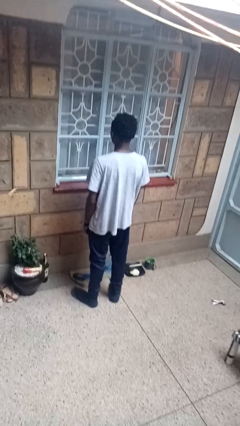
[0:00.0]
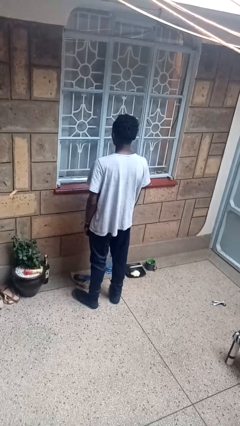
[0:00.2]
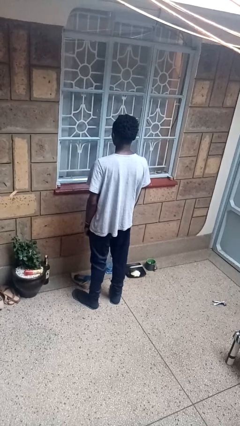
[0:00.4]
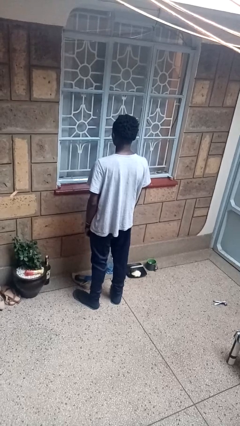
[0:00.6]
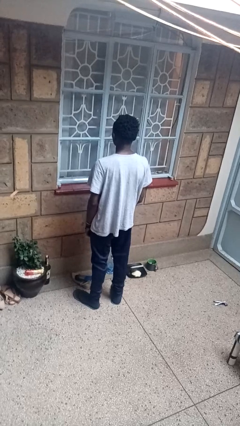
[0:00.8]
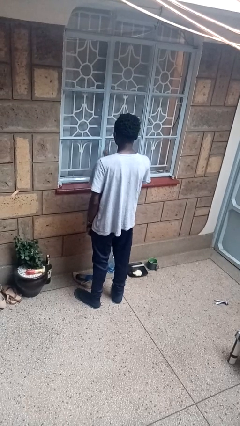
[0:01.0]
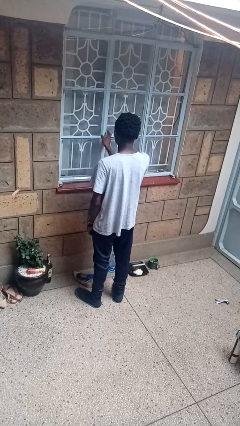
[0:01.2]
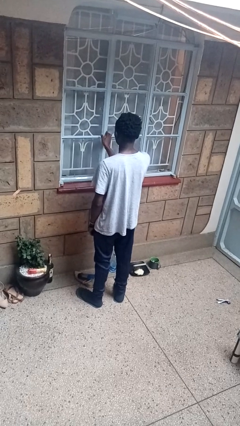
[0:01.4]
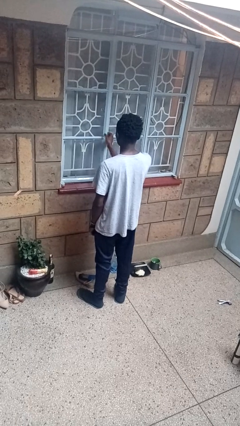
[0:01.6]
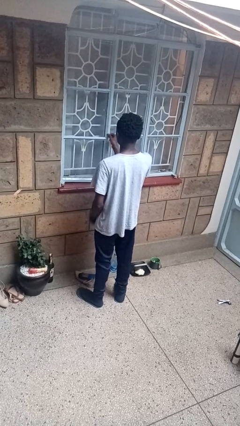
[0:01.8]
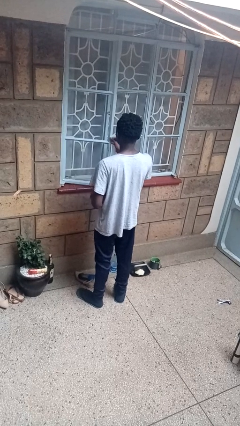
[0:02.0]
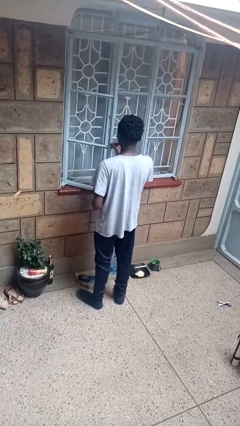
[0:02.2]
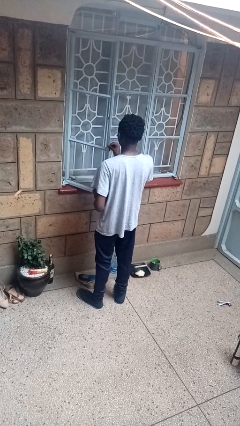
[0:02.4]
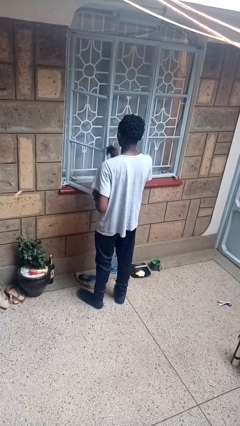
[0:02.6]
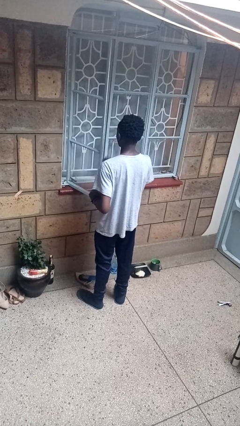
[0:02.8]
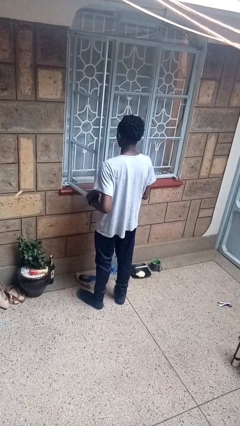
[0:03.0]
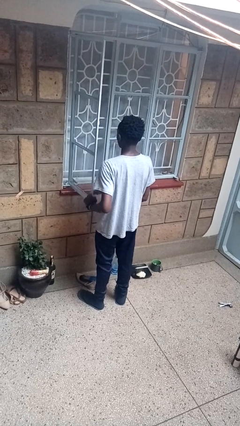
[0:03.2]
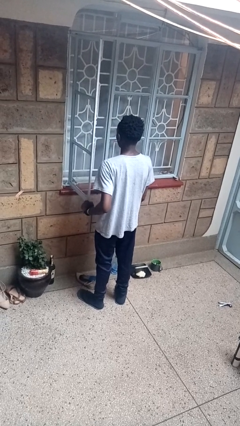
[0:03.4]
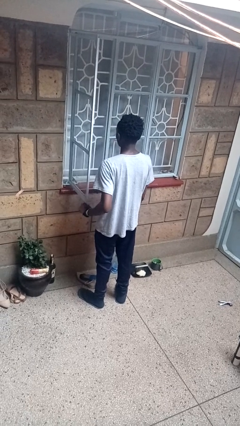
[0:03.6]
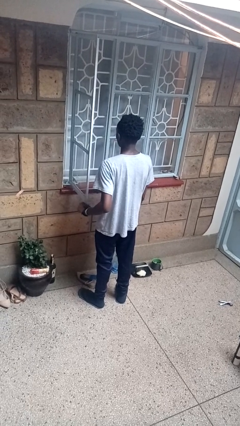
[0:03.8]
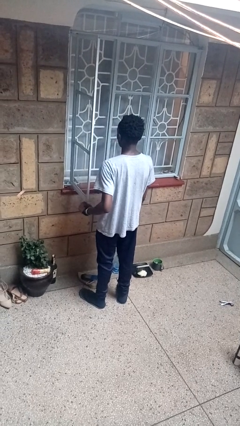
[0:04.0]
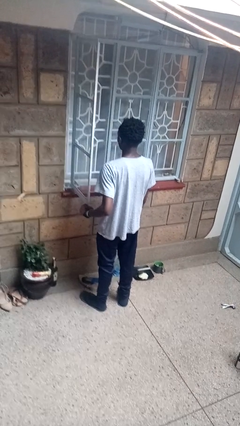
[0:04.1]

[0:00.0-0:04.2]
person opens home window

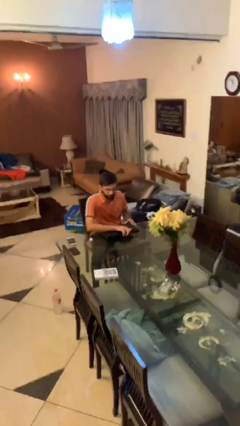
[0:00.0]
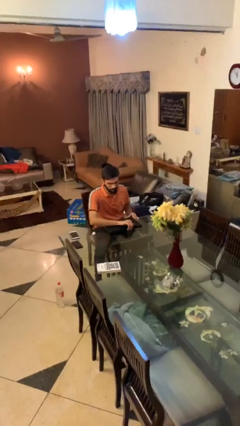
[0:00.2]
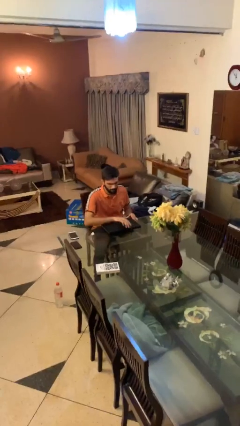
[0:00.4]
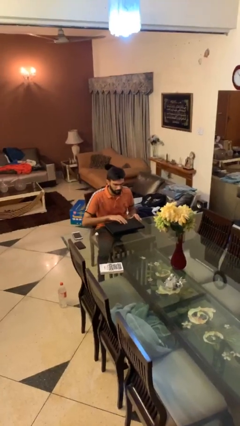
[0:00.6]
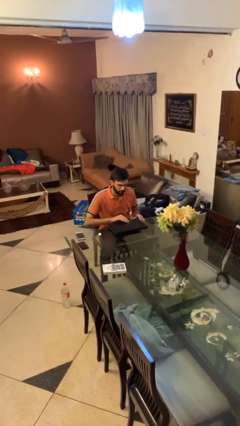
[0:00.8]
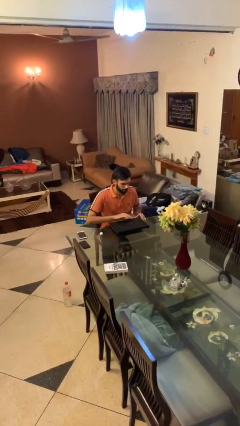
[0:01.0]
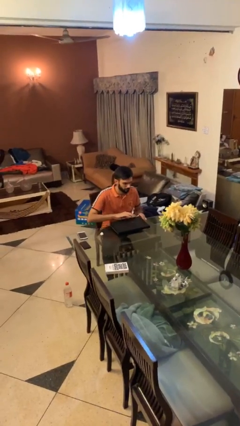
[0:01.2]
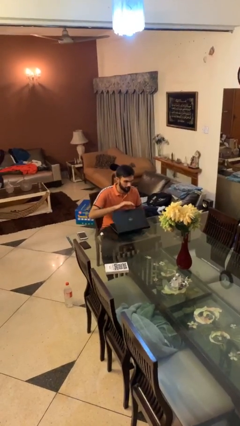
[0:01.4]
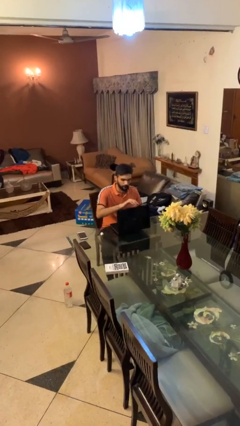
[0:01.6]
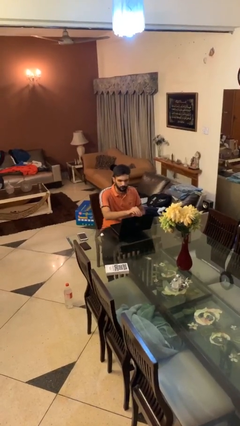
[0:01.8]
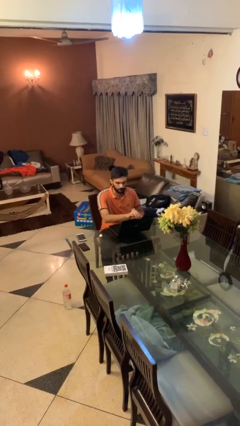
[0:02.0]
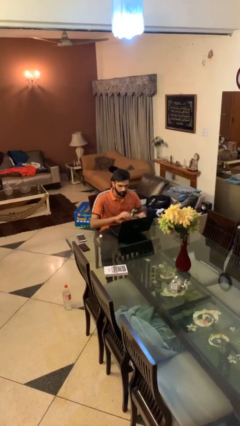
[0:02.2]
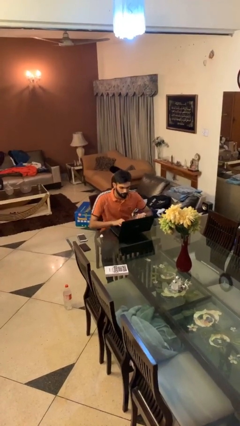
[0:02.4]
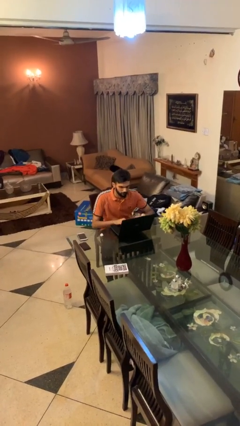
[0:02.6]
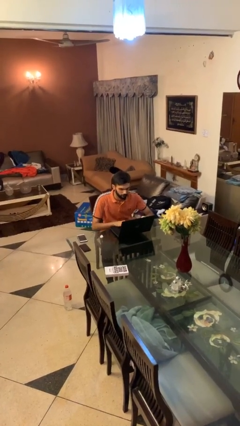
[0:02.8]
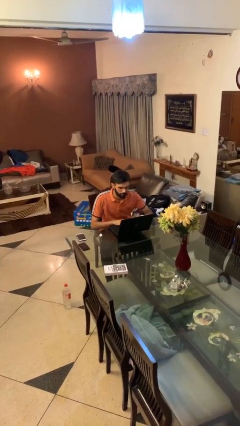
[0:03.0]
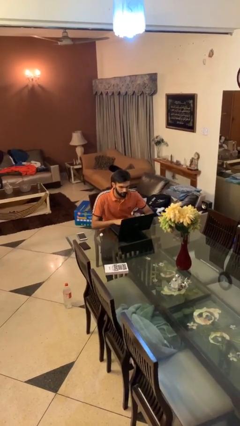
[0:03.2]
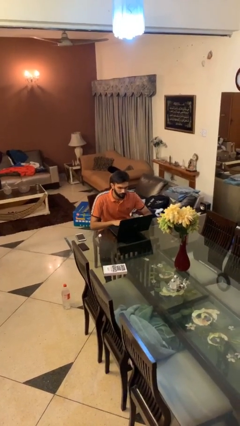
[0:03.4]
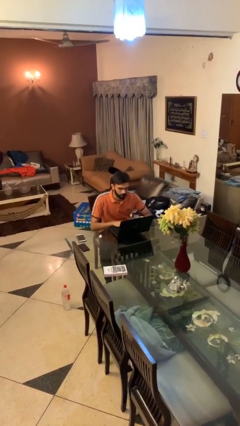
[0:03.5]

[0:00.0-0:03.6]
person interacts with laptop

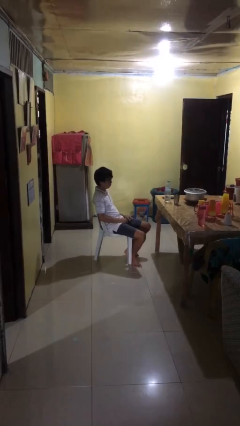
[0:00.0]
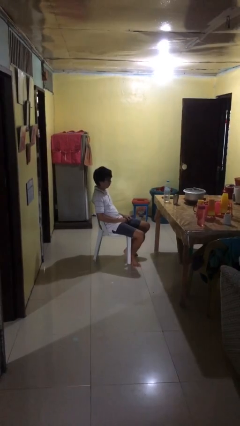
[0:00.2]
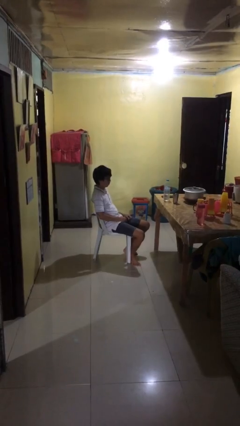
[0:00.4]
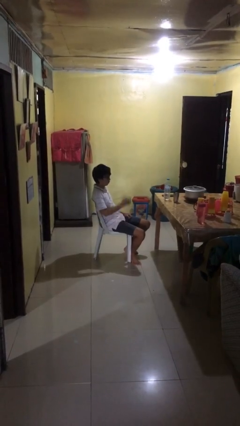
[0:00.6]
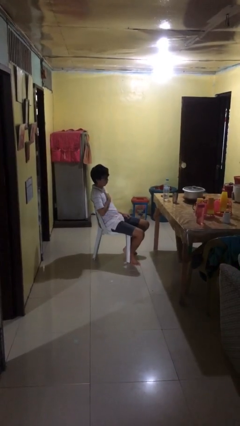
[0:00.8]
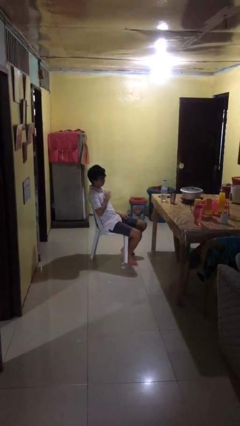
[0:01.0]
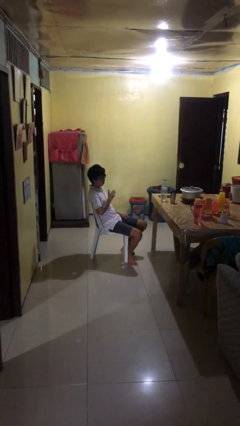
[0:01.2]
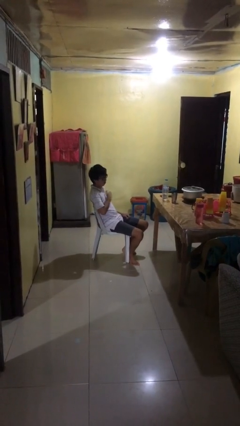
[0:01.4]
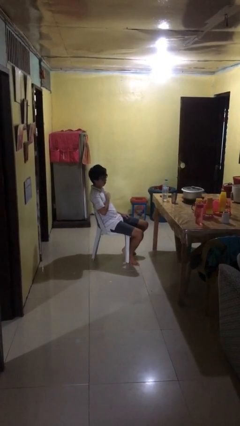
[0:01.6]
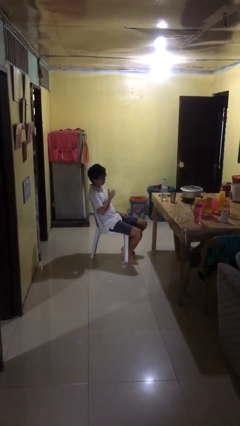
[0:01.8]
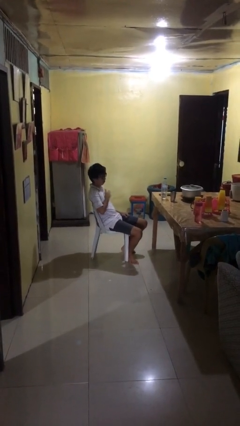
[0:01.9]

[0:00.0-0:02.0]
person drums on chest

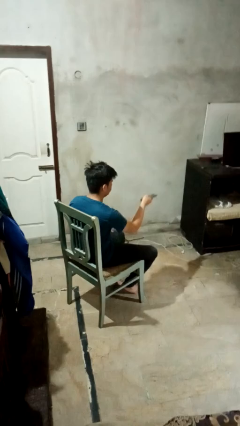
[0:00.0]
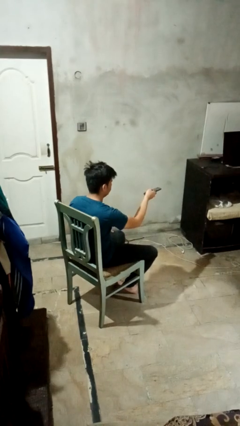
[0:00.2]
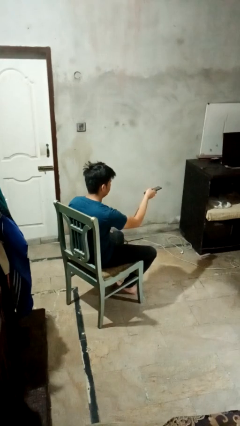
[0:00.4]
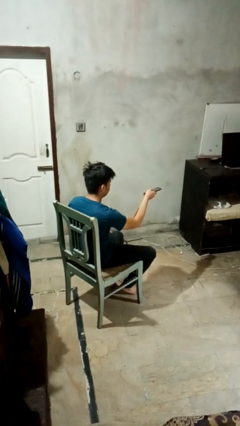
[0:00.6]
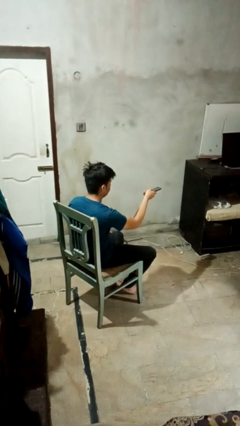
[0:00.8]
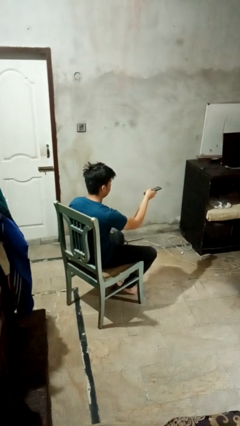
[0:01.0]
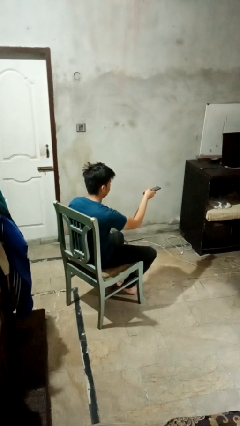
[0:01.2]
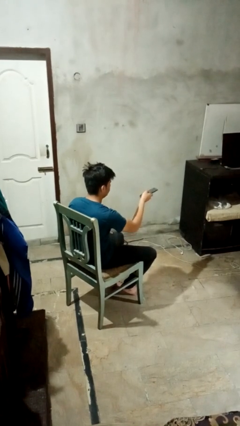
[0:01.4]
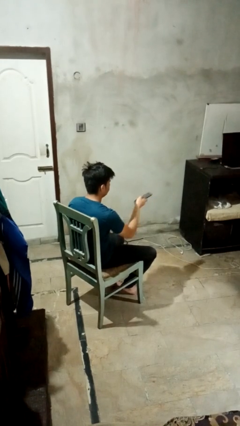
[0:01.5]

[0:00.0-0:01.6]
person uses television remote

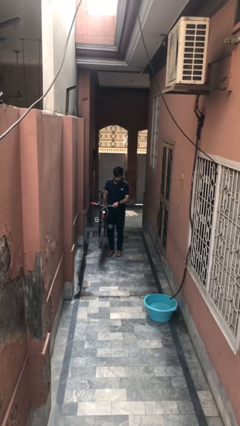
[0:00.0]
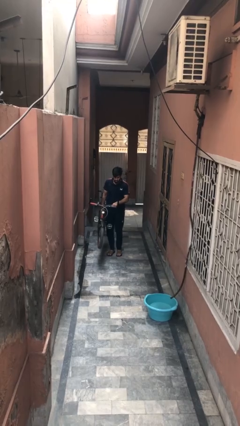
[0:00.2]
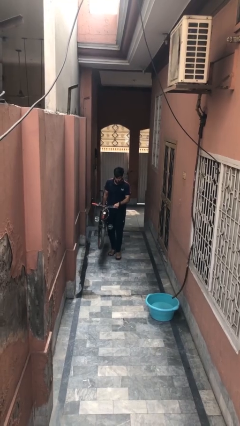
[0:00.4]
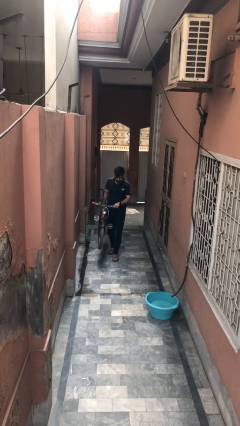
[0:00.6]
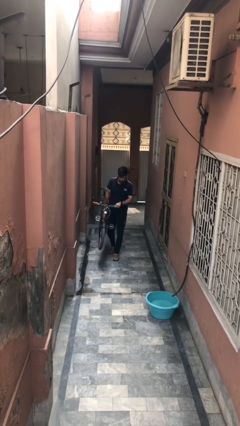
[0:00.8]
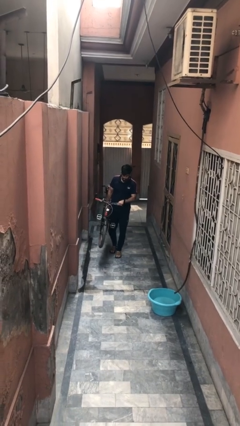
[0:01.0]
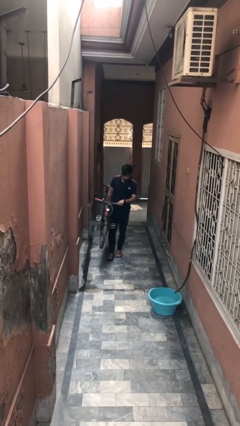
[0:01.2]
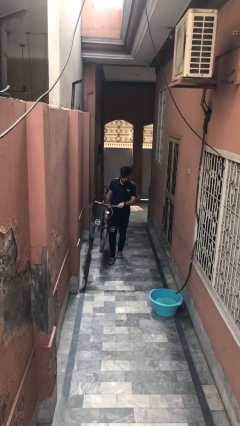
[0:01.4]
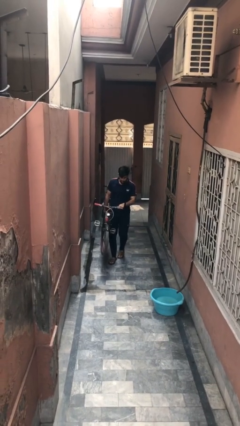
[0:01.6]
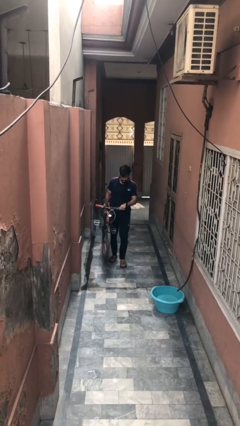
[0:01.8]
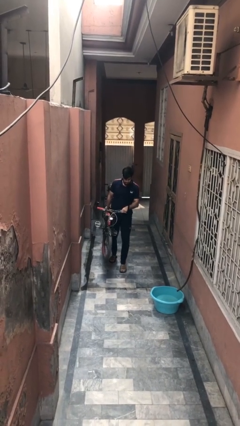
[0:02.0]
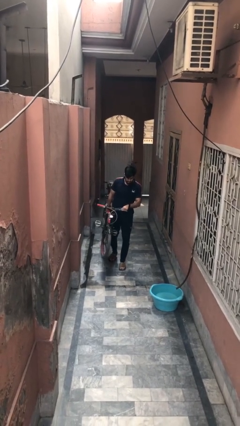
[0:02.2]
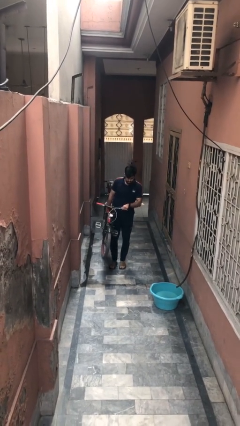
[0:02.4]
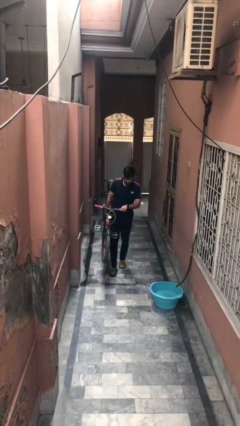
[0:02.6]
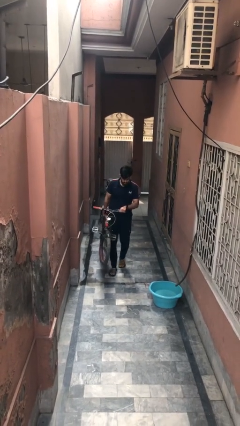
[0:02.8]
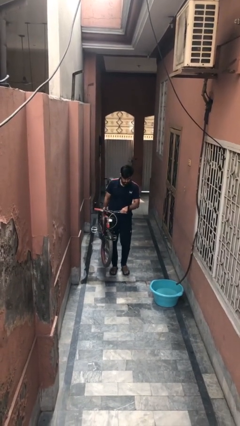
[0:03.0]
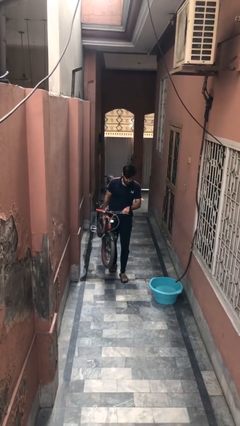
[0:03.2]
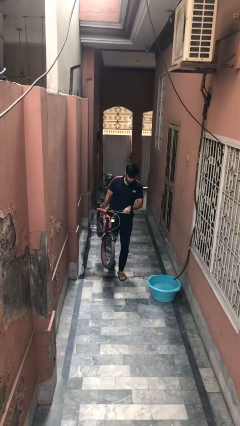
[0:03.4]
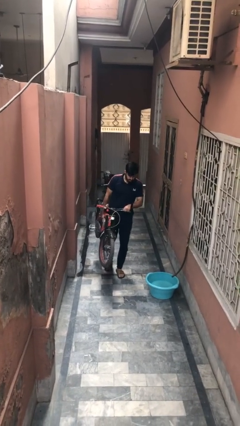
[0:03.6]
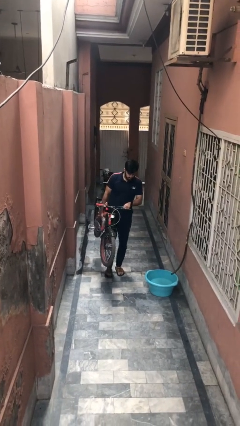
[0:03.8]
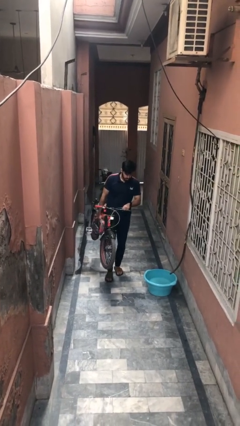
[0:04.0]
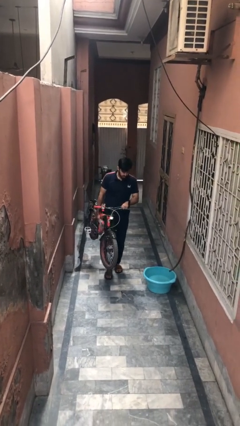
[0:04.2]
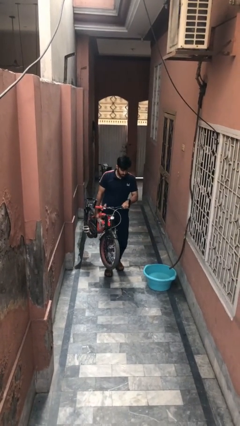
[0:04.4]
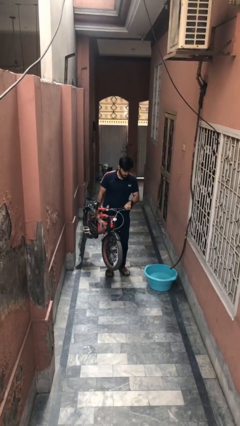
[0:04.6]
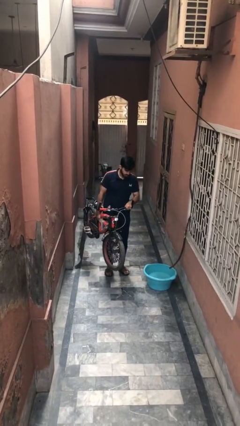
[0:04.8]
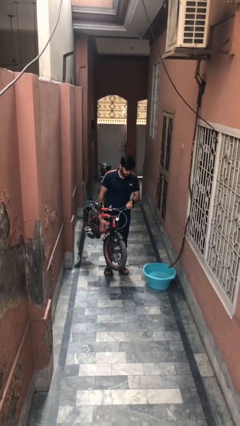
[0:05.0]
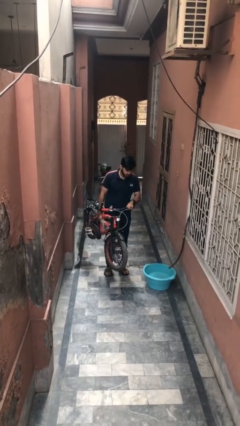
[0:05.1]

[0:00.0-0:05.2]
person carries bicycle

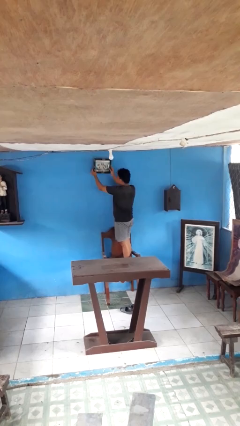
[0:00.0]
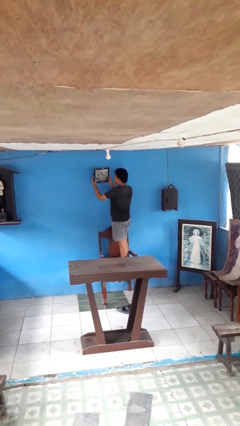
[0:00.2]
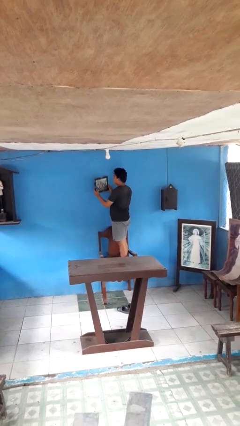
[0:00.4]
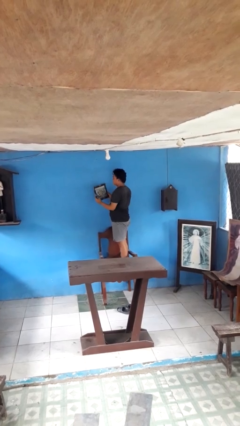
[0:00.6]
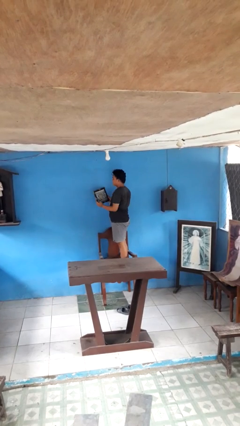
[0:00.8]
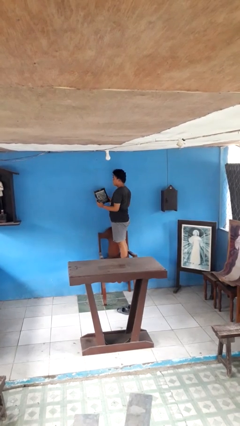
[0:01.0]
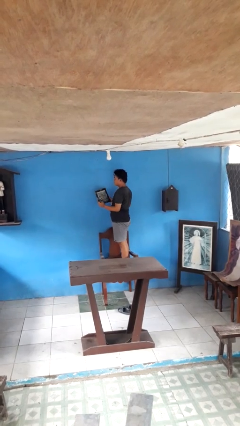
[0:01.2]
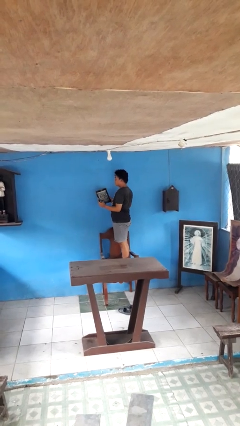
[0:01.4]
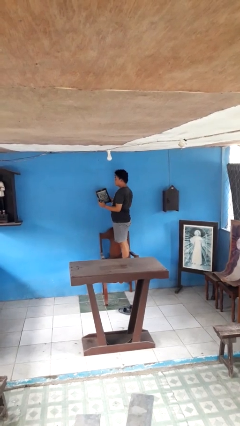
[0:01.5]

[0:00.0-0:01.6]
person takes down picture frame
